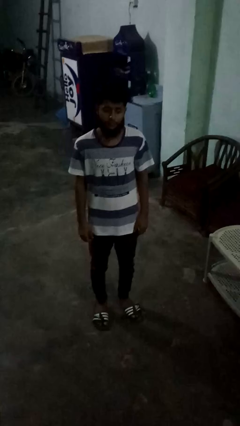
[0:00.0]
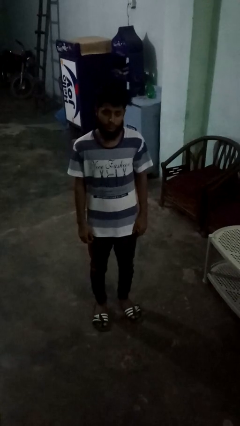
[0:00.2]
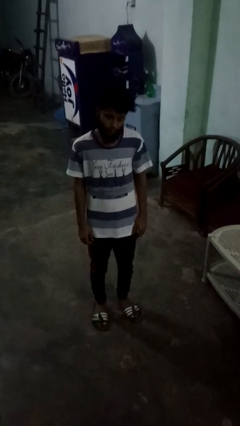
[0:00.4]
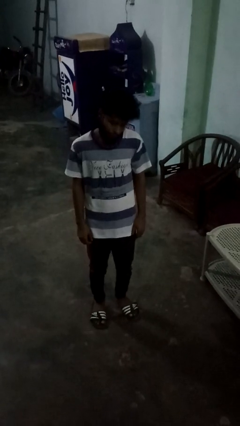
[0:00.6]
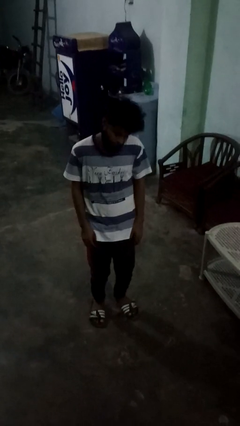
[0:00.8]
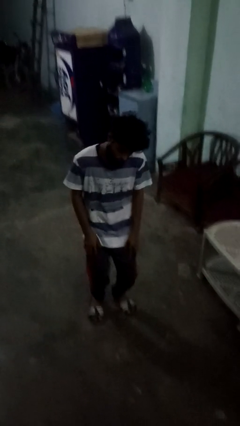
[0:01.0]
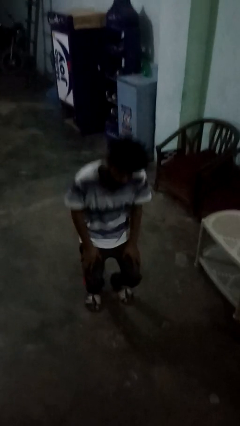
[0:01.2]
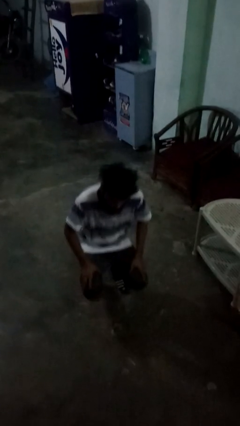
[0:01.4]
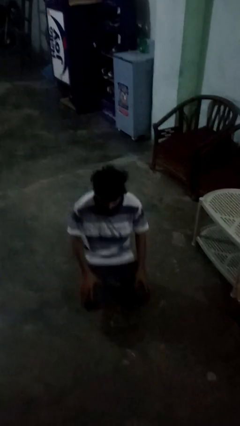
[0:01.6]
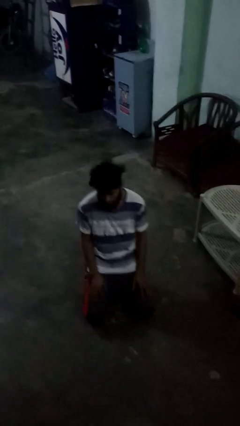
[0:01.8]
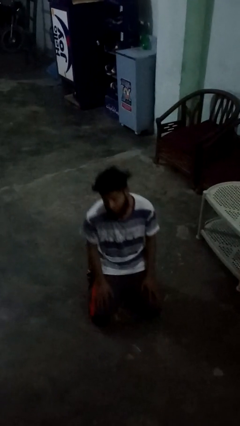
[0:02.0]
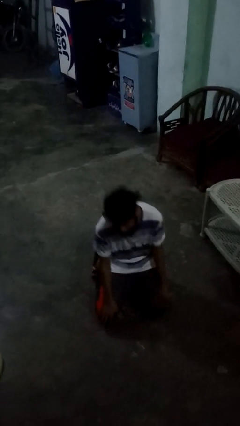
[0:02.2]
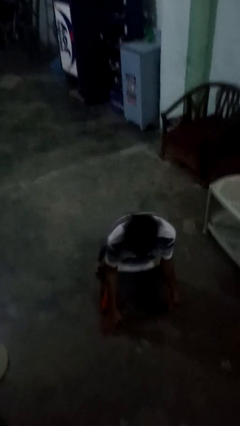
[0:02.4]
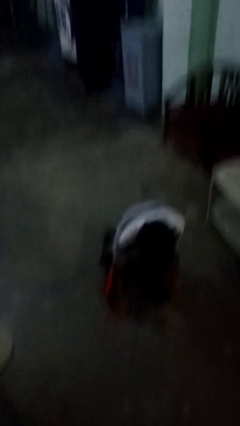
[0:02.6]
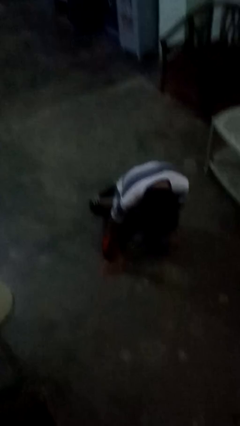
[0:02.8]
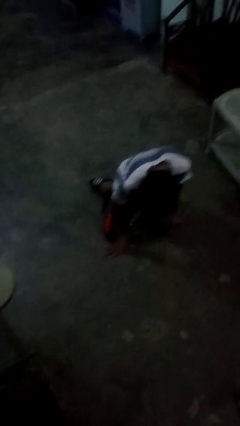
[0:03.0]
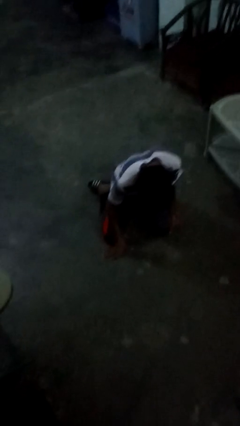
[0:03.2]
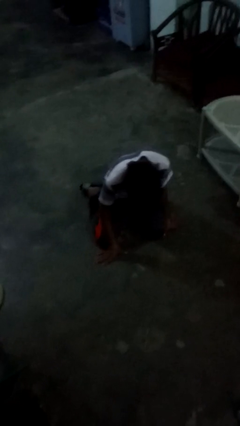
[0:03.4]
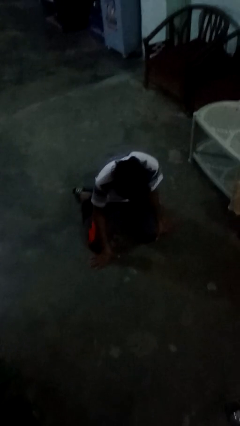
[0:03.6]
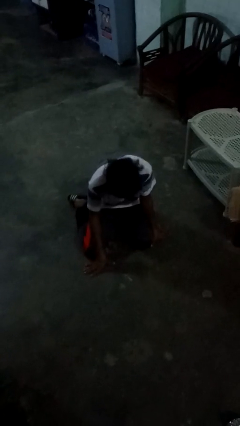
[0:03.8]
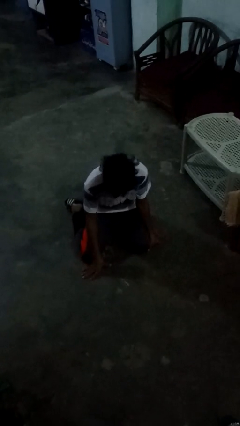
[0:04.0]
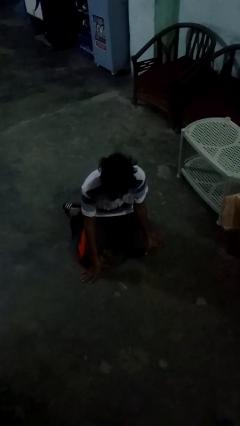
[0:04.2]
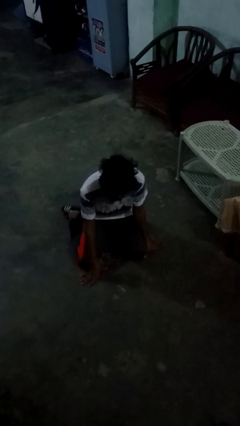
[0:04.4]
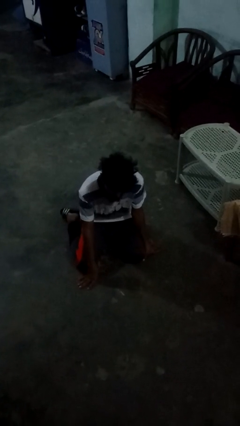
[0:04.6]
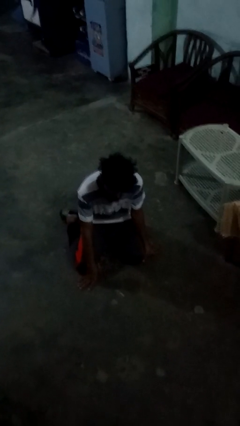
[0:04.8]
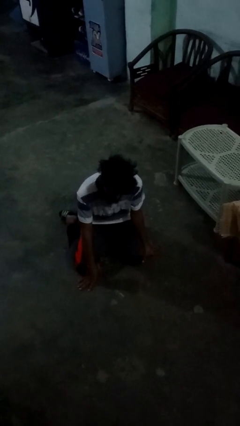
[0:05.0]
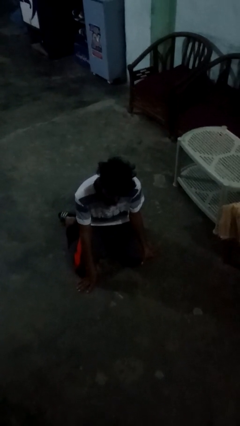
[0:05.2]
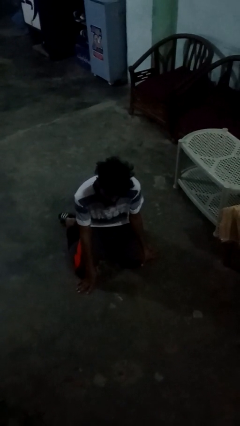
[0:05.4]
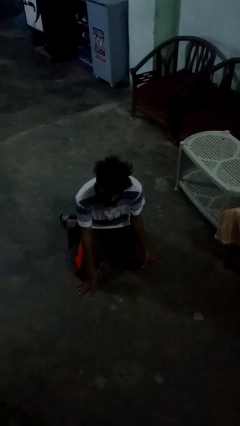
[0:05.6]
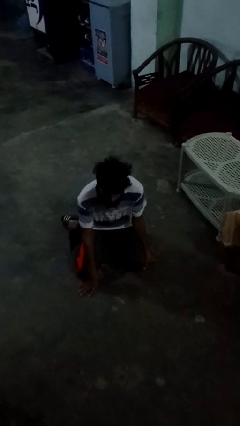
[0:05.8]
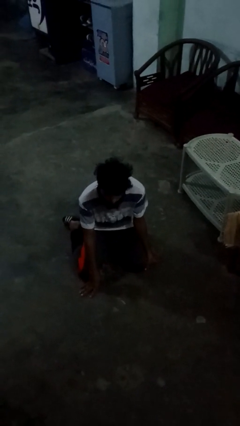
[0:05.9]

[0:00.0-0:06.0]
person falls while standing

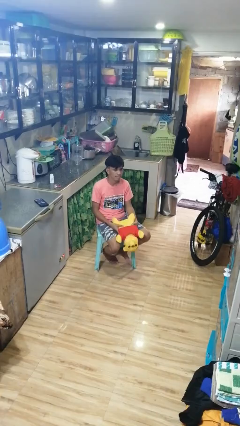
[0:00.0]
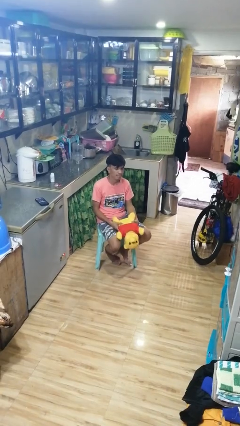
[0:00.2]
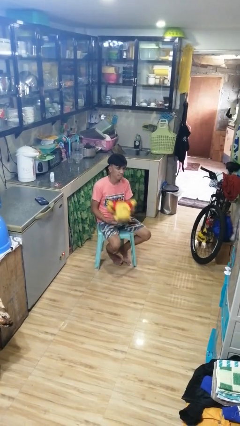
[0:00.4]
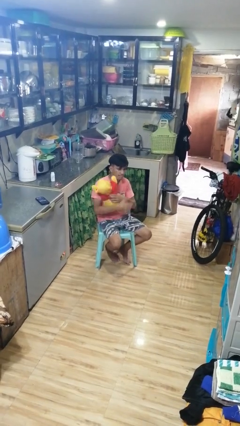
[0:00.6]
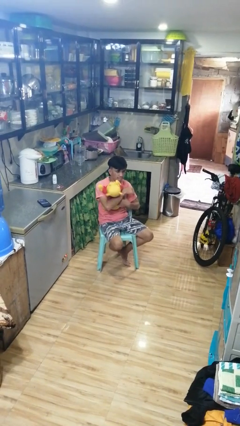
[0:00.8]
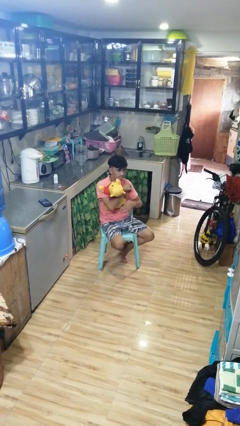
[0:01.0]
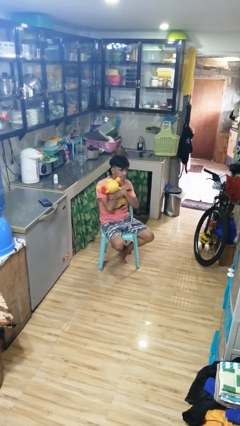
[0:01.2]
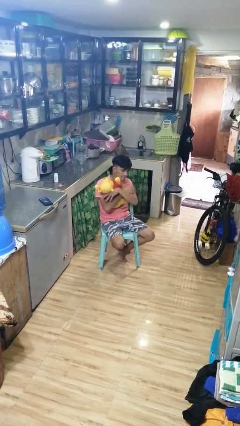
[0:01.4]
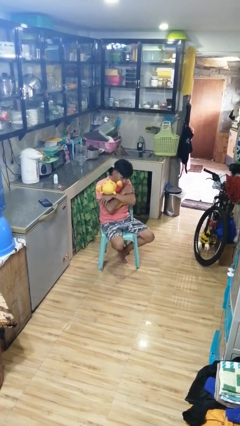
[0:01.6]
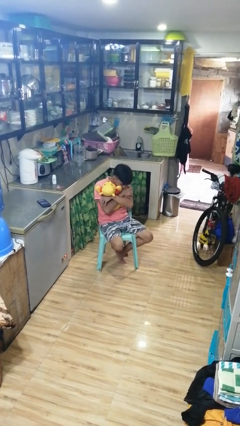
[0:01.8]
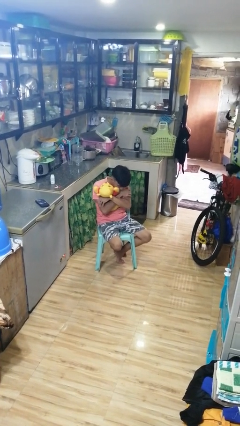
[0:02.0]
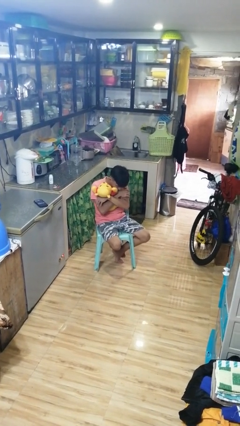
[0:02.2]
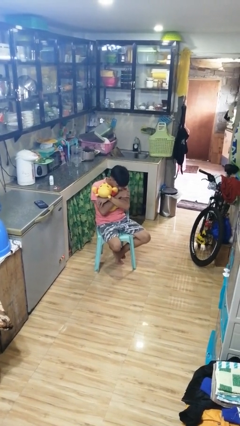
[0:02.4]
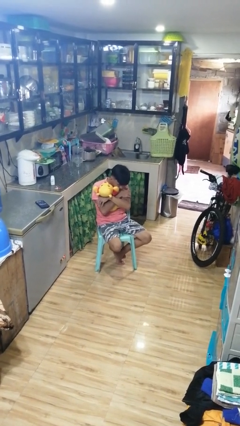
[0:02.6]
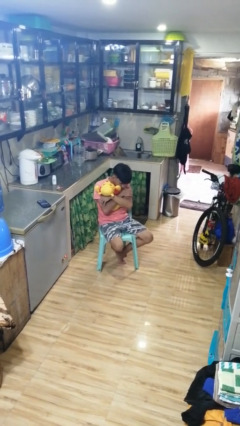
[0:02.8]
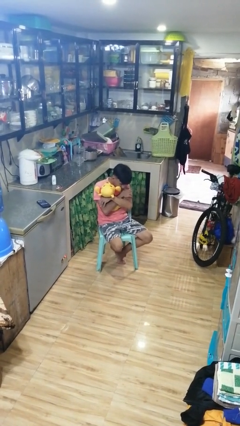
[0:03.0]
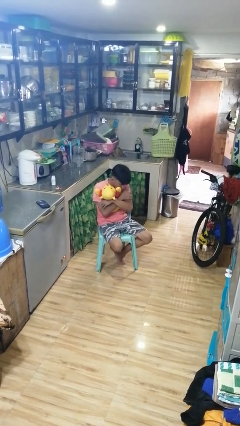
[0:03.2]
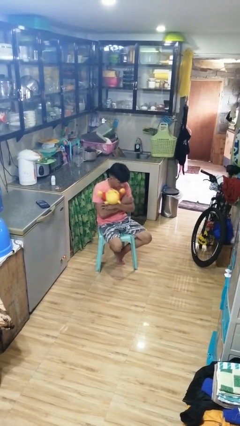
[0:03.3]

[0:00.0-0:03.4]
person hugs stuffed animal

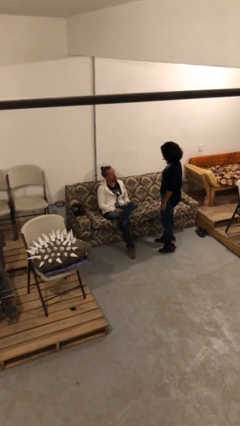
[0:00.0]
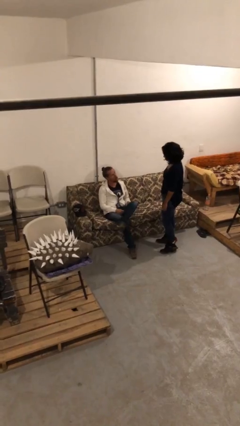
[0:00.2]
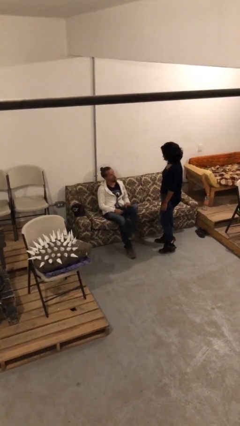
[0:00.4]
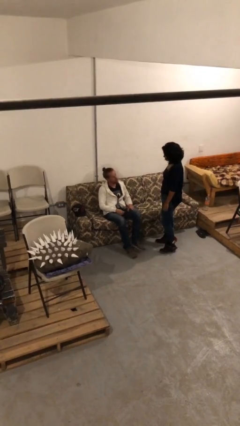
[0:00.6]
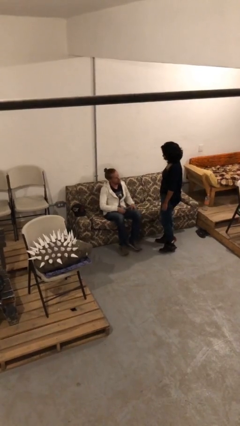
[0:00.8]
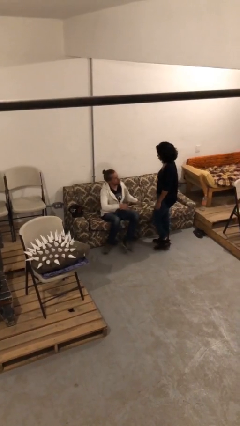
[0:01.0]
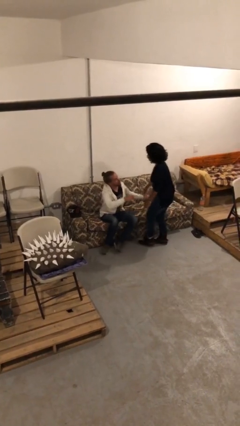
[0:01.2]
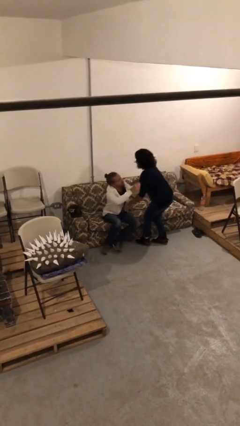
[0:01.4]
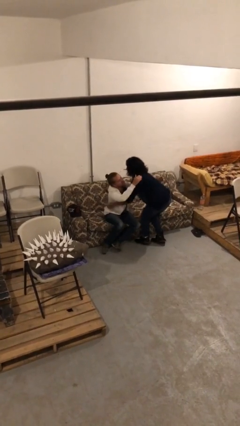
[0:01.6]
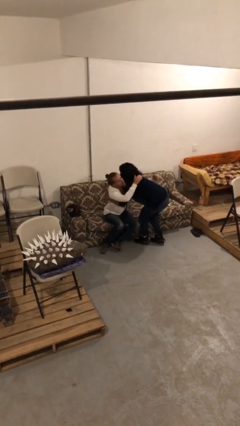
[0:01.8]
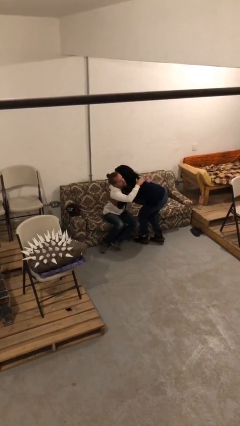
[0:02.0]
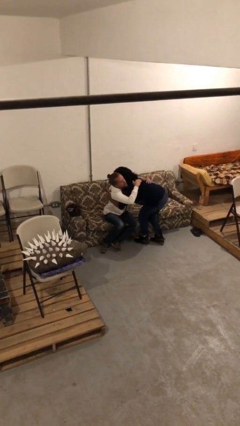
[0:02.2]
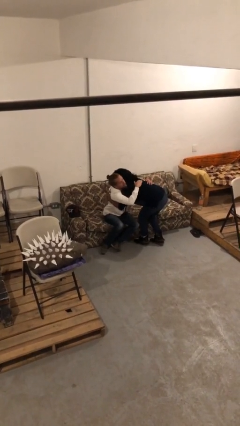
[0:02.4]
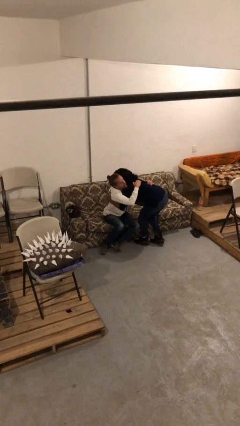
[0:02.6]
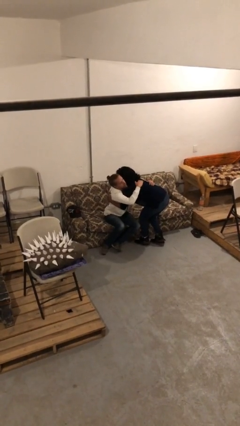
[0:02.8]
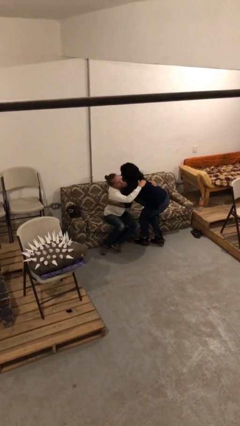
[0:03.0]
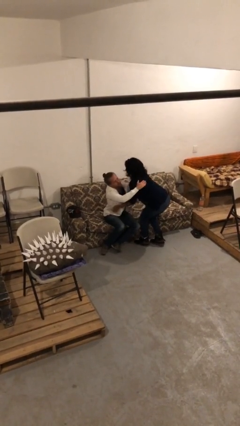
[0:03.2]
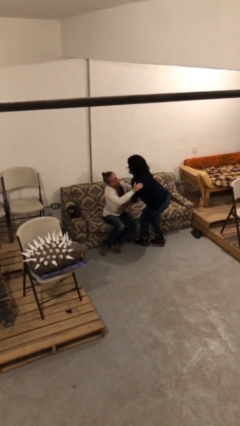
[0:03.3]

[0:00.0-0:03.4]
person embraces person

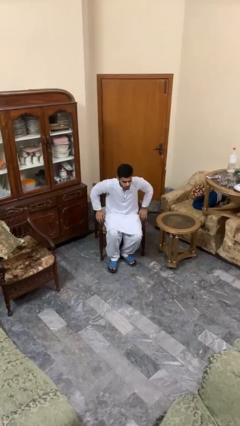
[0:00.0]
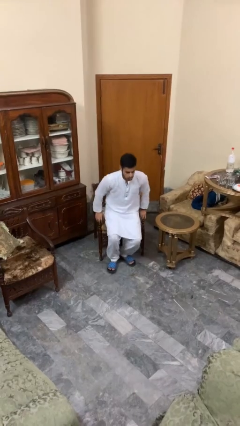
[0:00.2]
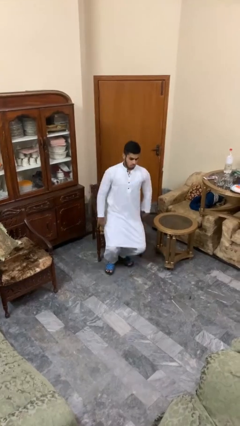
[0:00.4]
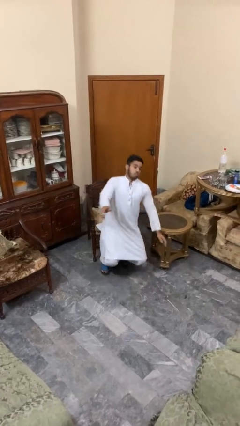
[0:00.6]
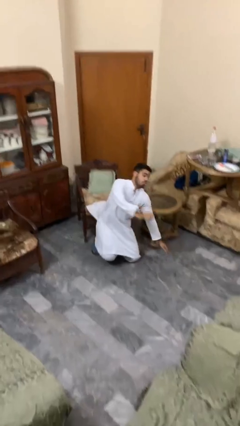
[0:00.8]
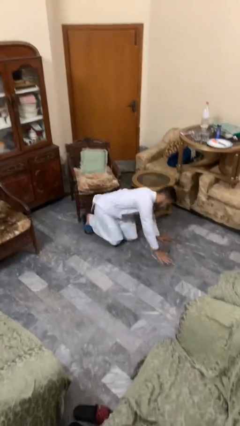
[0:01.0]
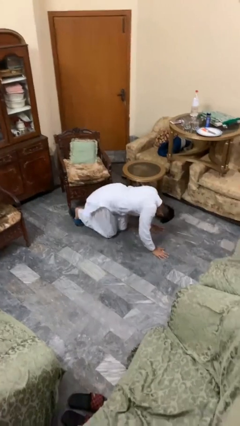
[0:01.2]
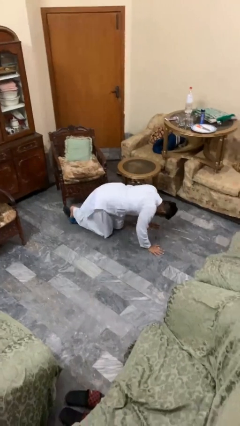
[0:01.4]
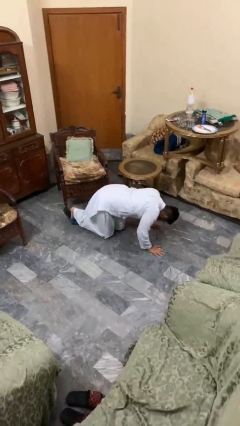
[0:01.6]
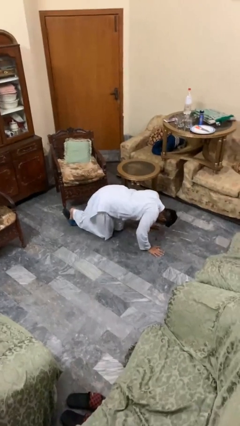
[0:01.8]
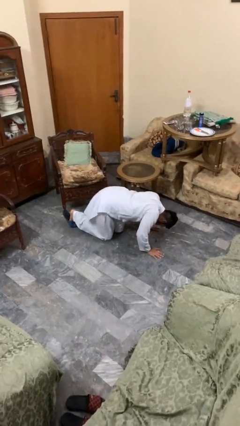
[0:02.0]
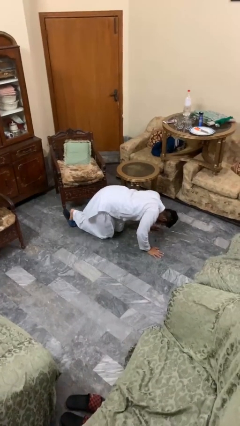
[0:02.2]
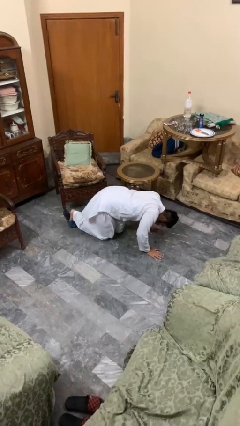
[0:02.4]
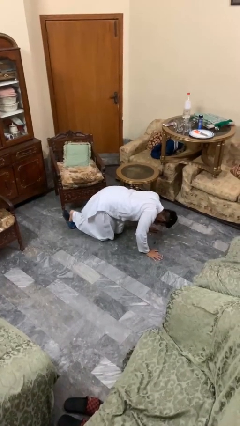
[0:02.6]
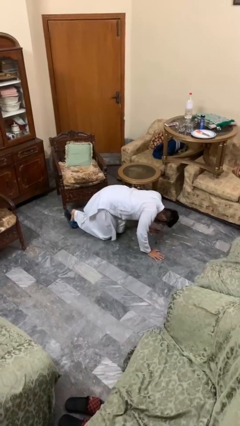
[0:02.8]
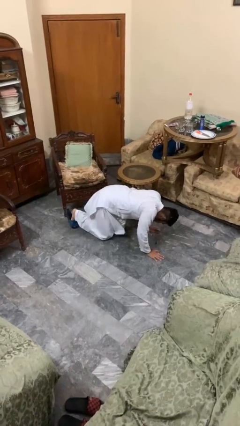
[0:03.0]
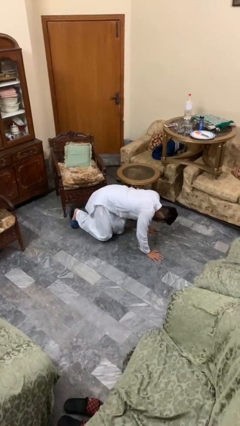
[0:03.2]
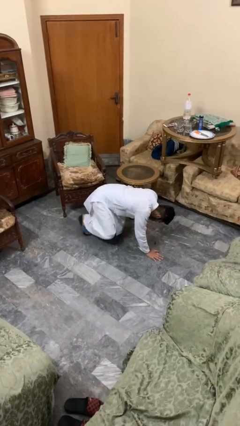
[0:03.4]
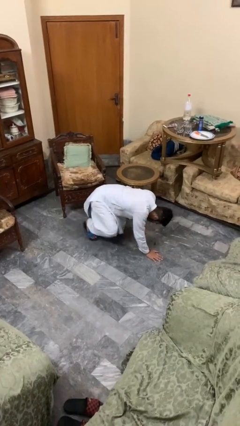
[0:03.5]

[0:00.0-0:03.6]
person falls from chair

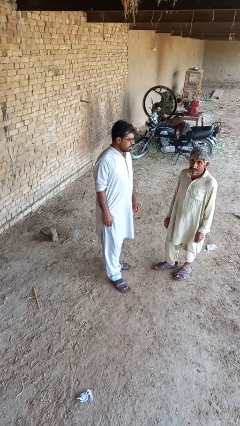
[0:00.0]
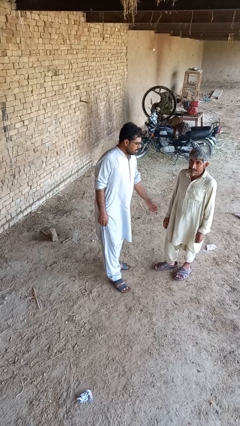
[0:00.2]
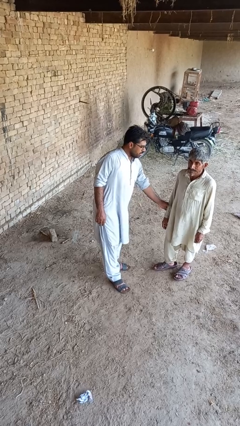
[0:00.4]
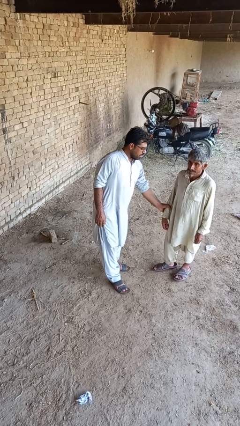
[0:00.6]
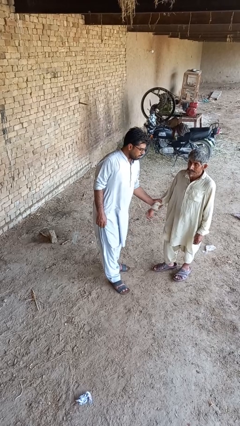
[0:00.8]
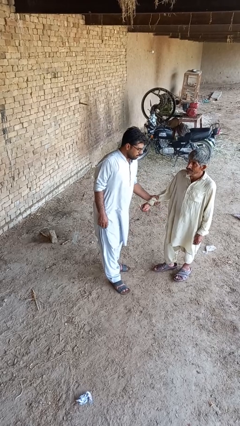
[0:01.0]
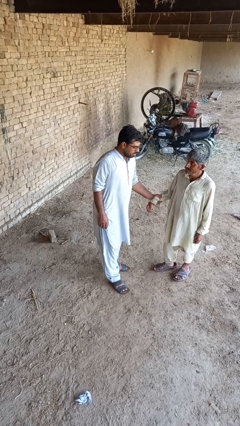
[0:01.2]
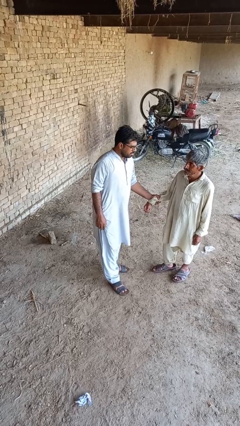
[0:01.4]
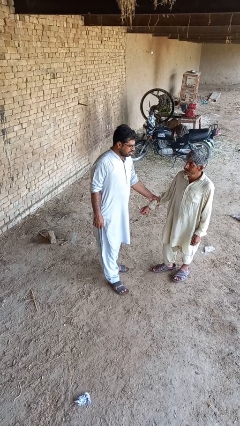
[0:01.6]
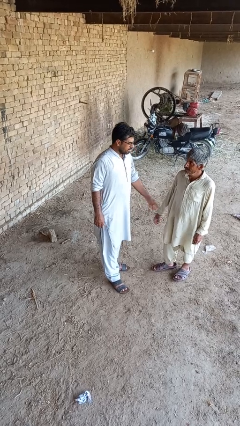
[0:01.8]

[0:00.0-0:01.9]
person grabs person by forearm
